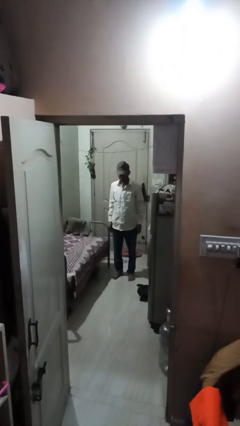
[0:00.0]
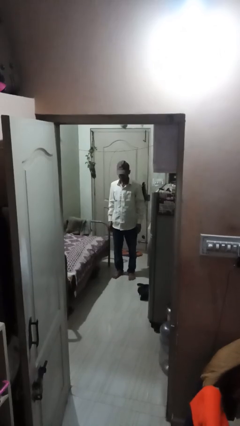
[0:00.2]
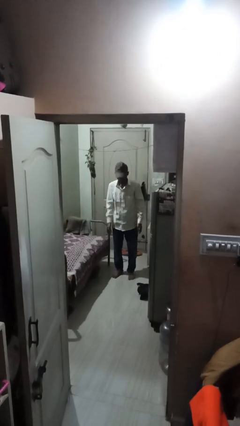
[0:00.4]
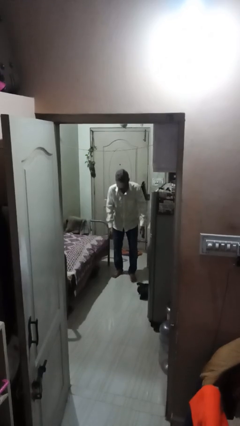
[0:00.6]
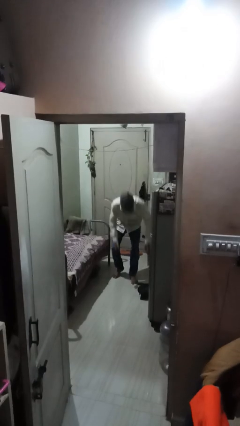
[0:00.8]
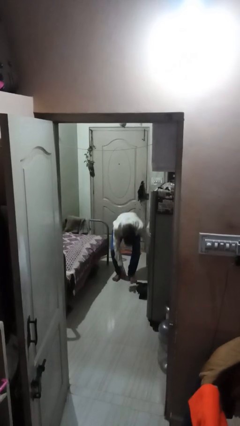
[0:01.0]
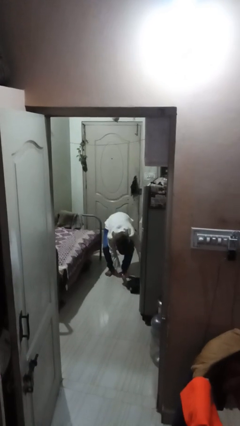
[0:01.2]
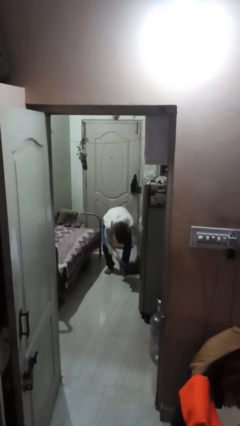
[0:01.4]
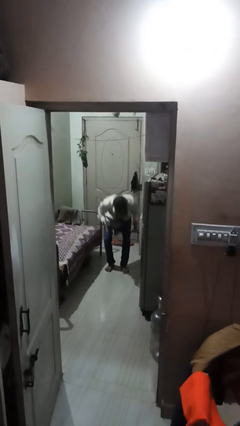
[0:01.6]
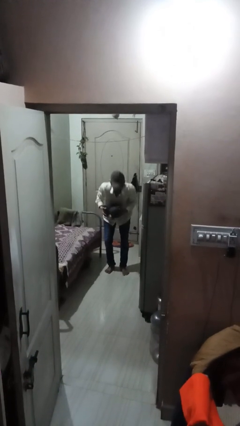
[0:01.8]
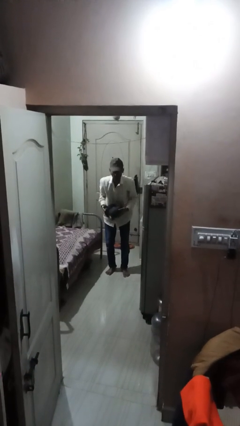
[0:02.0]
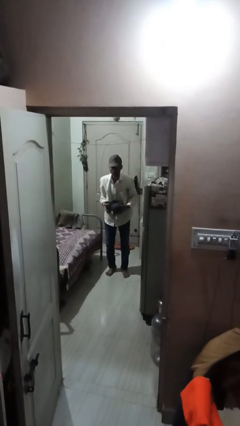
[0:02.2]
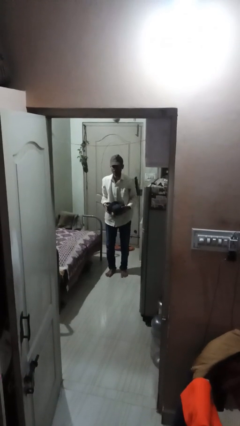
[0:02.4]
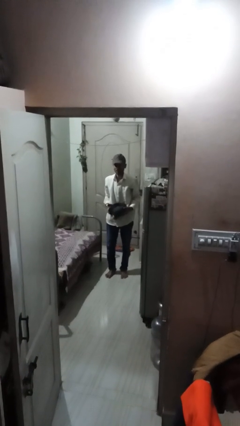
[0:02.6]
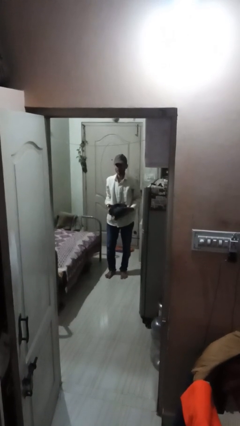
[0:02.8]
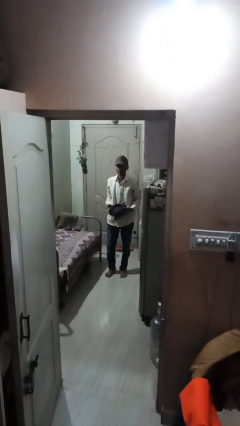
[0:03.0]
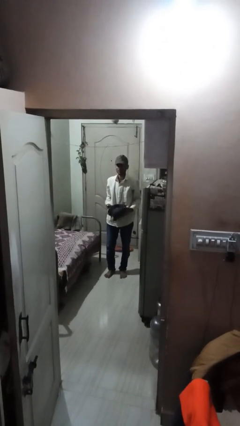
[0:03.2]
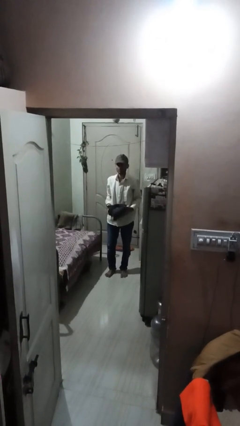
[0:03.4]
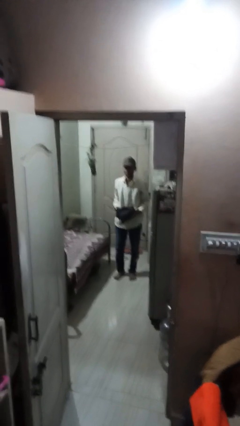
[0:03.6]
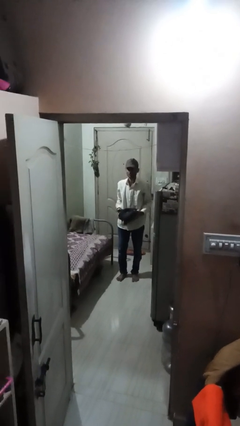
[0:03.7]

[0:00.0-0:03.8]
person picks up object from floor

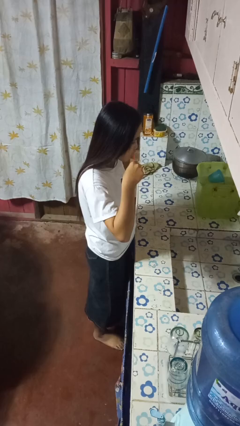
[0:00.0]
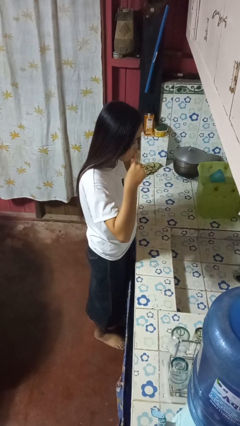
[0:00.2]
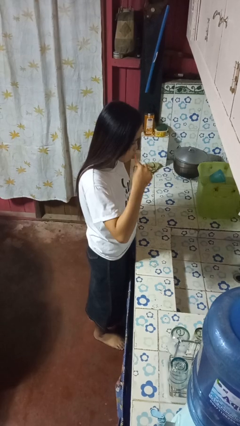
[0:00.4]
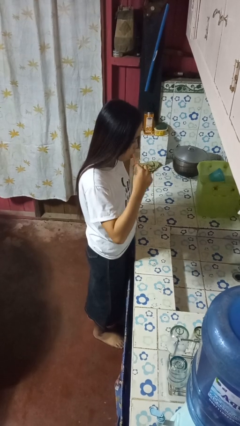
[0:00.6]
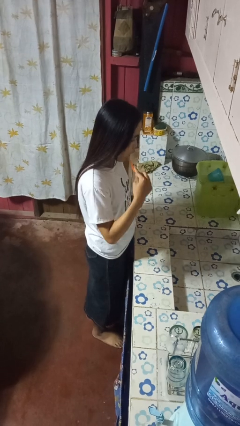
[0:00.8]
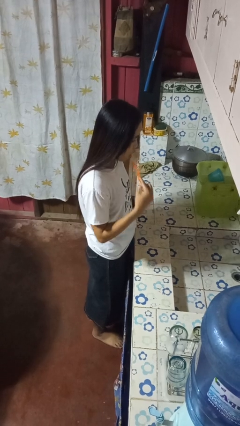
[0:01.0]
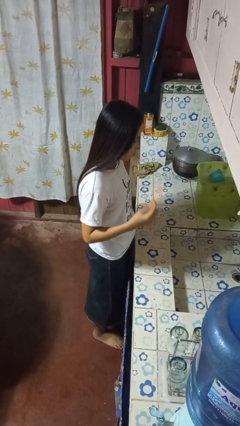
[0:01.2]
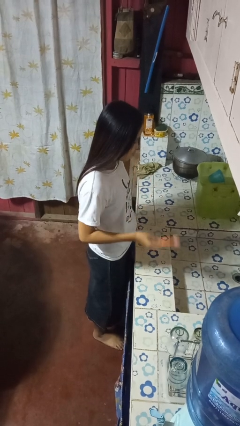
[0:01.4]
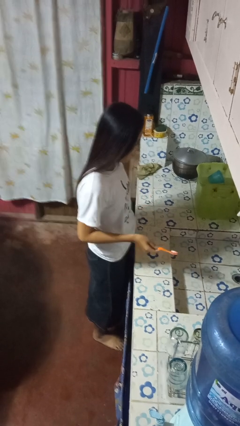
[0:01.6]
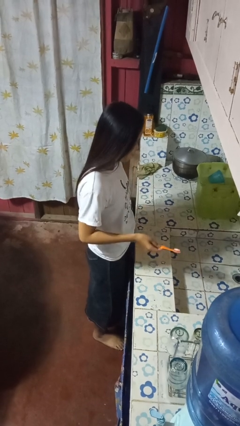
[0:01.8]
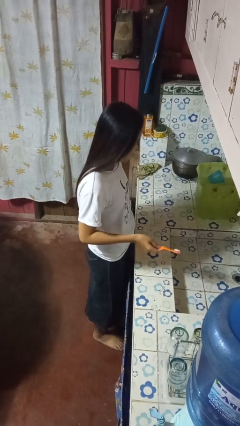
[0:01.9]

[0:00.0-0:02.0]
person brushes teeth

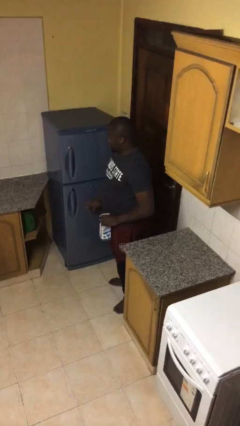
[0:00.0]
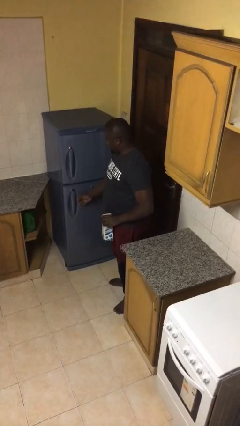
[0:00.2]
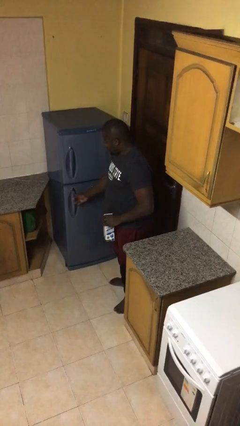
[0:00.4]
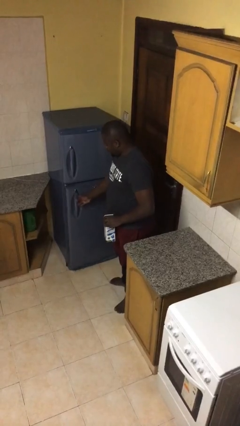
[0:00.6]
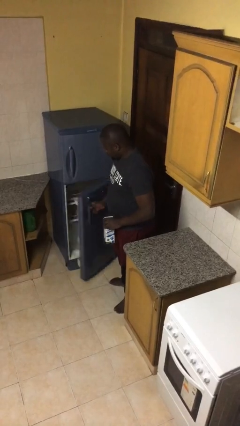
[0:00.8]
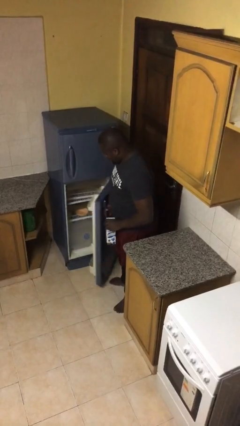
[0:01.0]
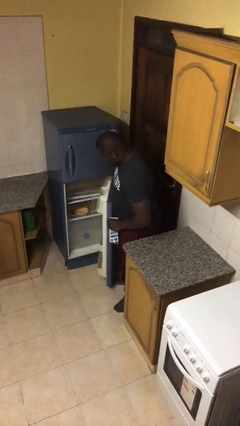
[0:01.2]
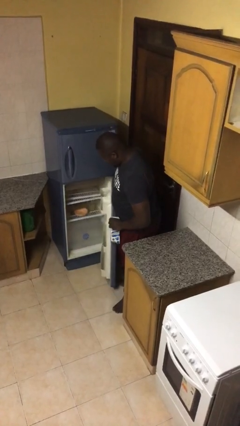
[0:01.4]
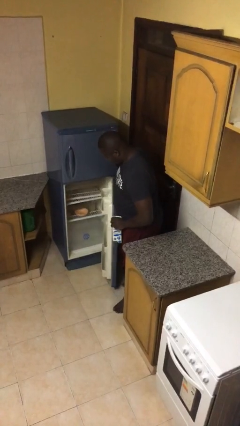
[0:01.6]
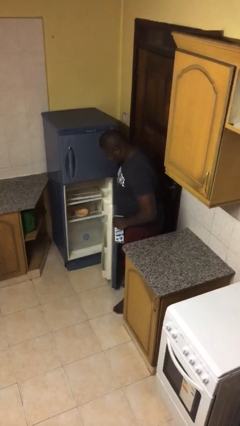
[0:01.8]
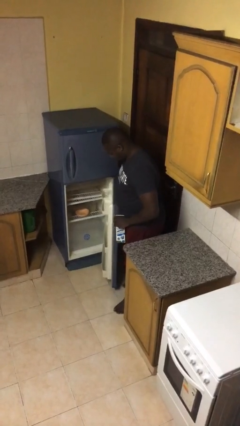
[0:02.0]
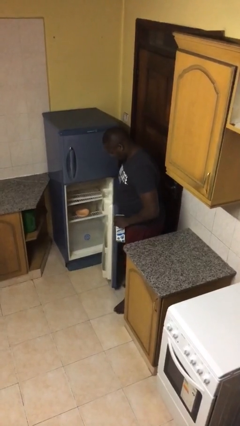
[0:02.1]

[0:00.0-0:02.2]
person opens refrigerator

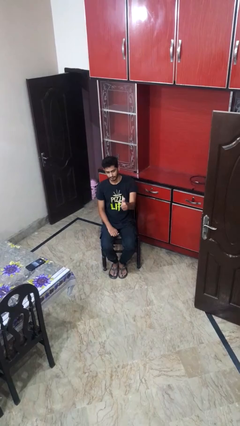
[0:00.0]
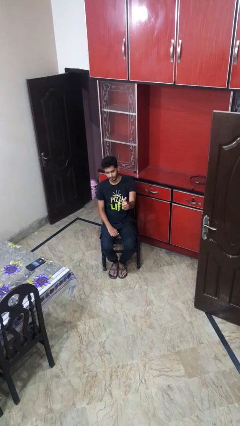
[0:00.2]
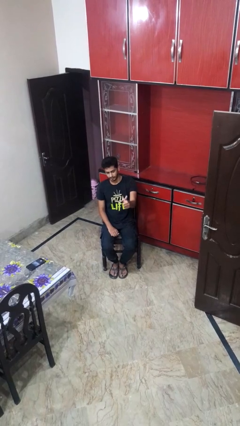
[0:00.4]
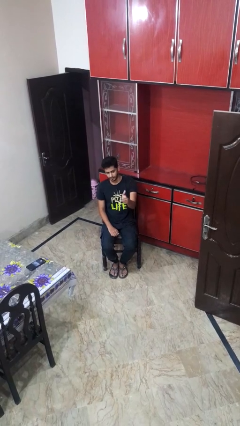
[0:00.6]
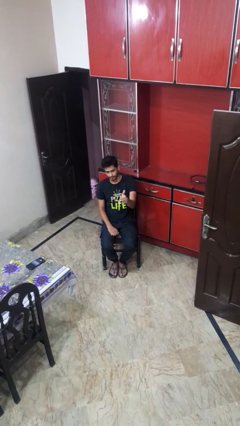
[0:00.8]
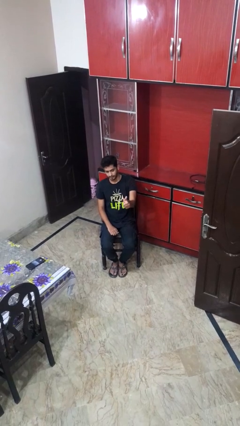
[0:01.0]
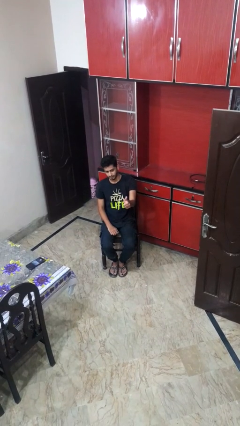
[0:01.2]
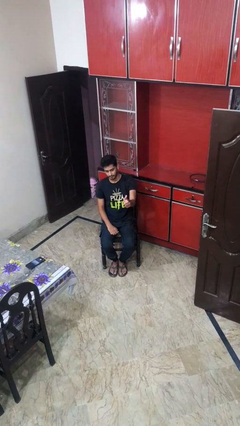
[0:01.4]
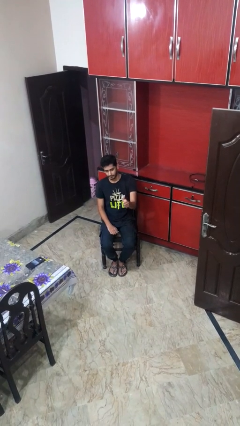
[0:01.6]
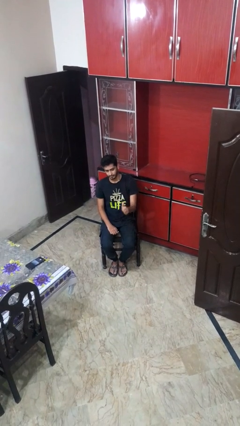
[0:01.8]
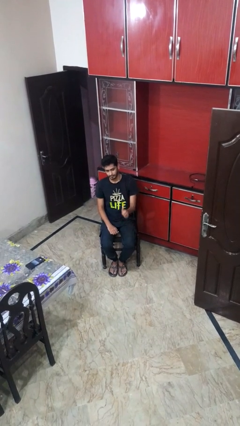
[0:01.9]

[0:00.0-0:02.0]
person gestures thumbs up

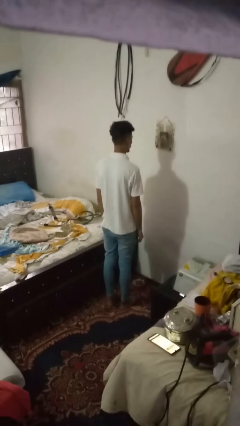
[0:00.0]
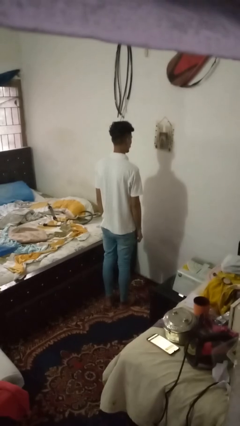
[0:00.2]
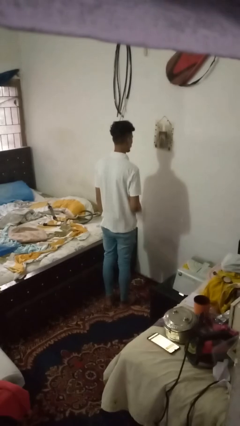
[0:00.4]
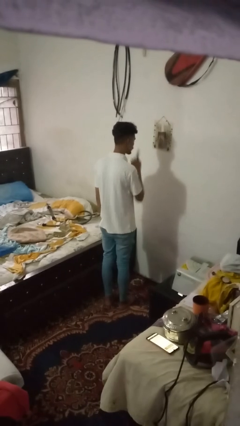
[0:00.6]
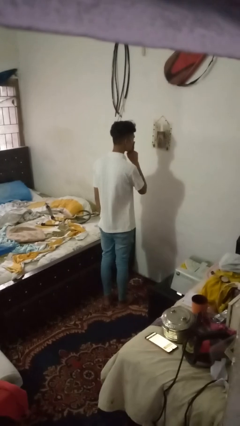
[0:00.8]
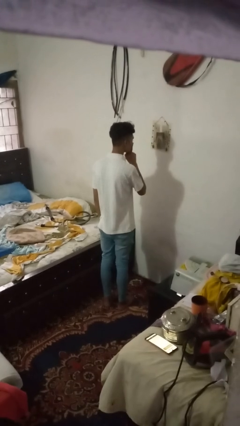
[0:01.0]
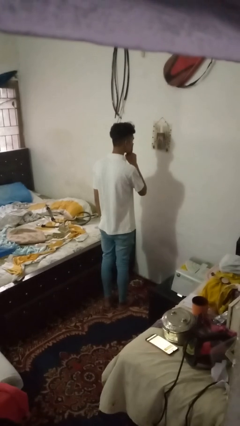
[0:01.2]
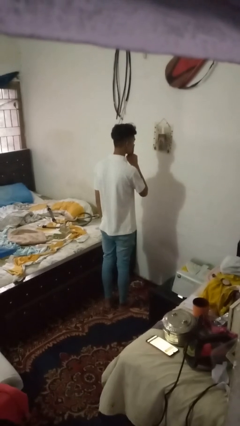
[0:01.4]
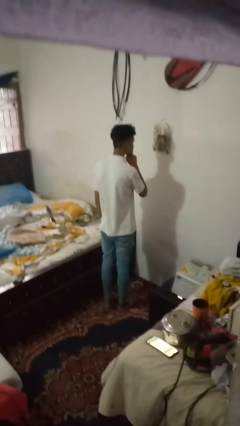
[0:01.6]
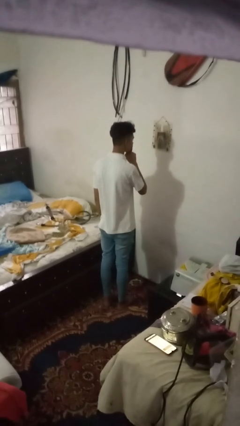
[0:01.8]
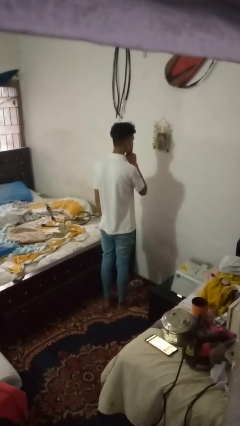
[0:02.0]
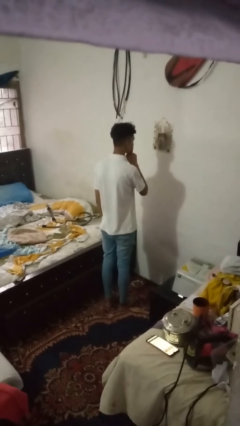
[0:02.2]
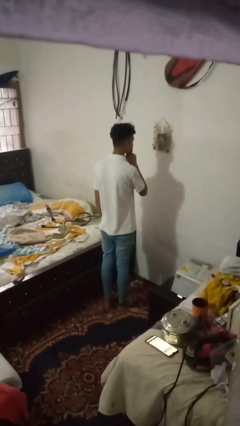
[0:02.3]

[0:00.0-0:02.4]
person gestures be quiet

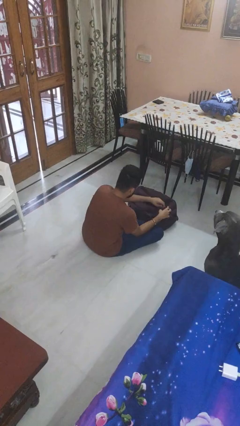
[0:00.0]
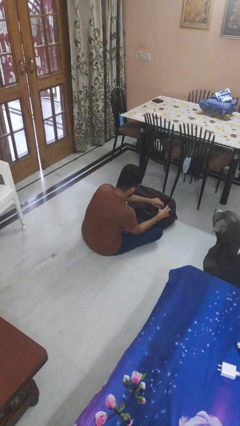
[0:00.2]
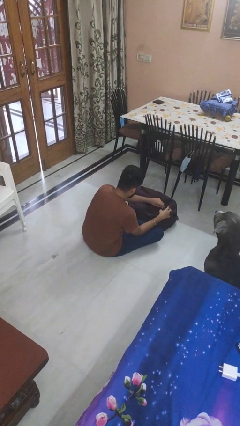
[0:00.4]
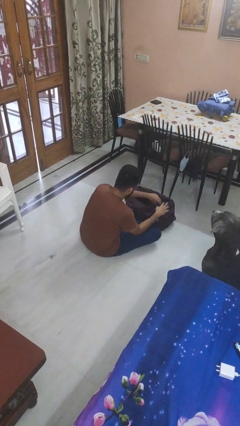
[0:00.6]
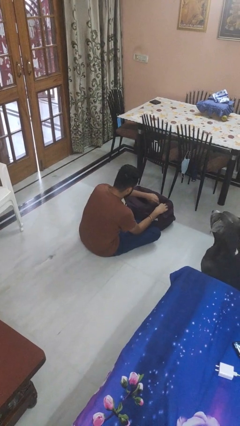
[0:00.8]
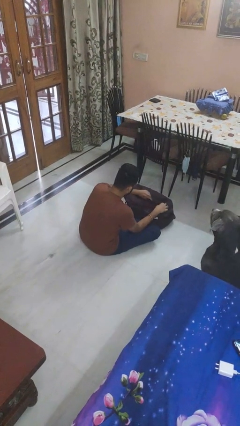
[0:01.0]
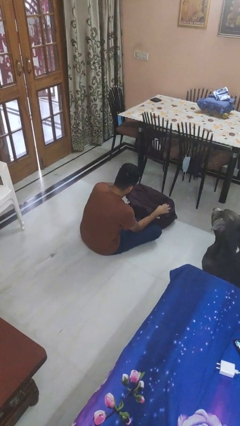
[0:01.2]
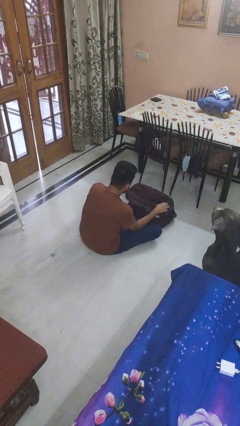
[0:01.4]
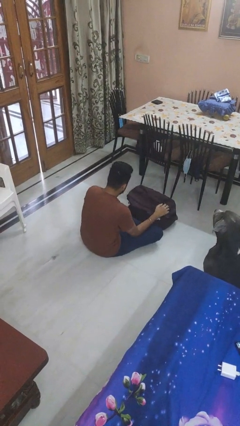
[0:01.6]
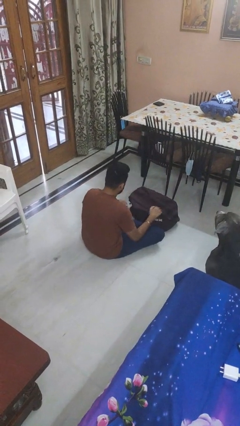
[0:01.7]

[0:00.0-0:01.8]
person closes suitcase

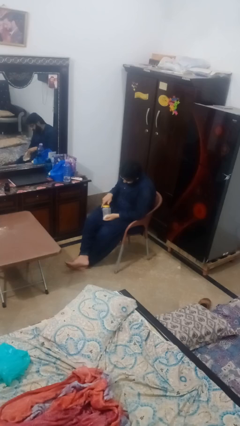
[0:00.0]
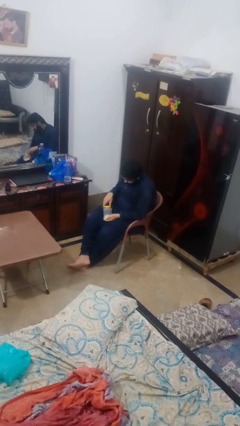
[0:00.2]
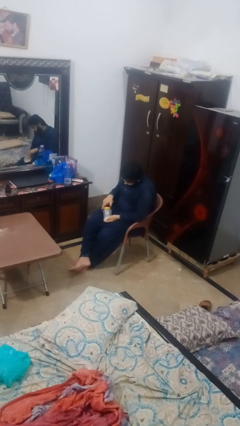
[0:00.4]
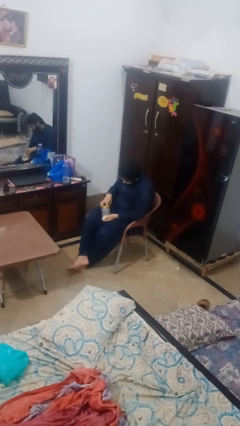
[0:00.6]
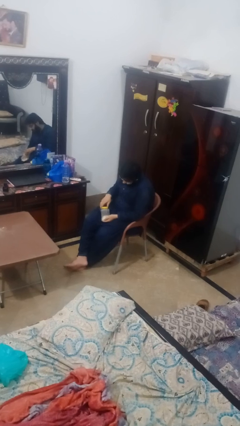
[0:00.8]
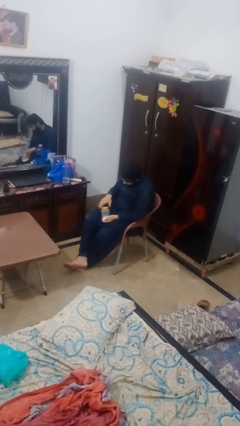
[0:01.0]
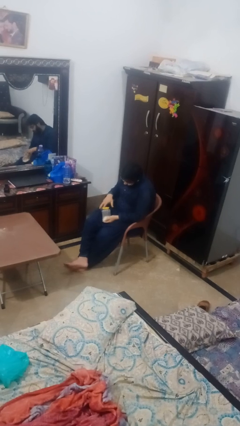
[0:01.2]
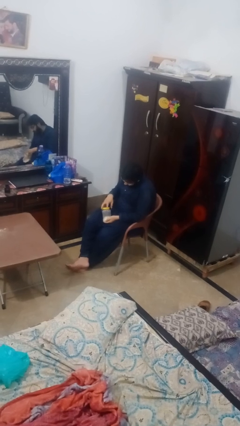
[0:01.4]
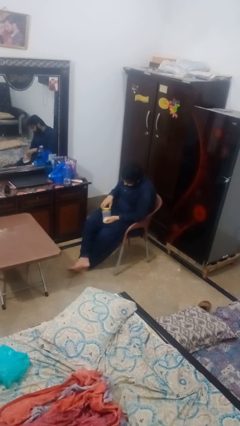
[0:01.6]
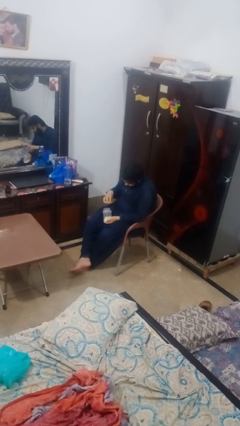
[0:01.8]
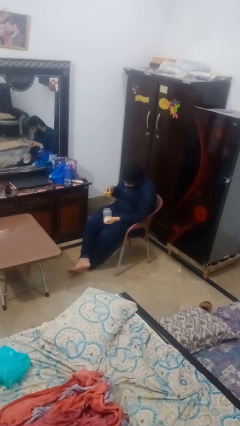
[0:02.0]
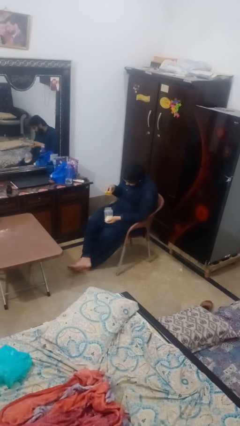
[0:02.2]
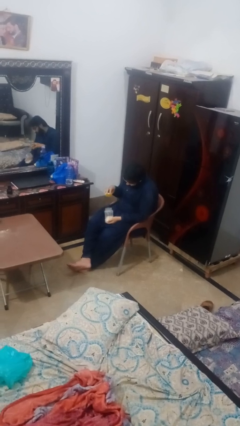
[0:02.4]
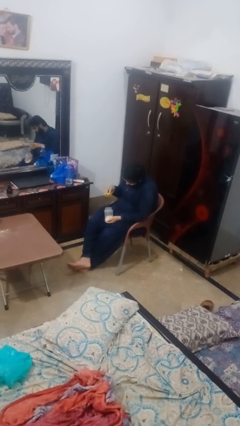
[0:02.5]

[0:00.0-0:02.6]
person opens jar

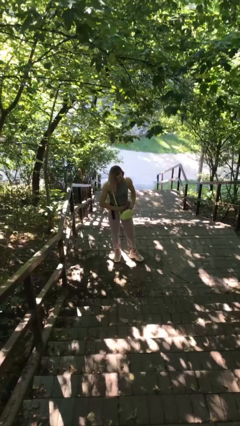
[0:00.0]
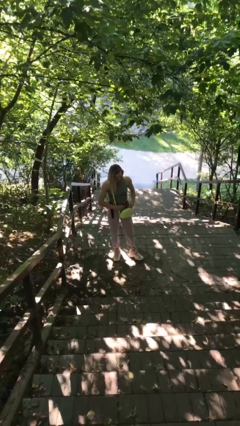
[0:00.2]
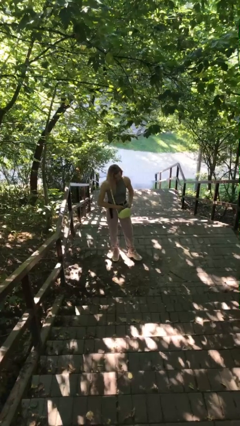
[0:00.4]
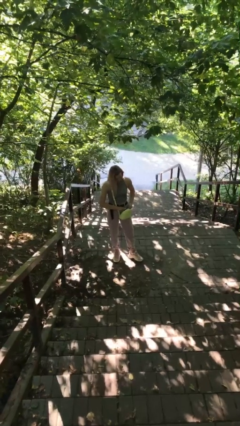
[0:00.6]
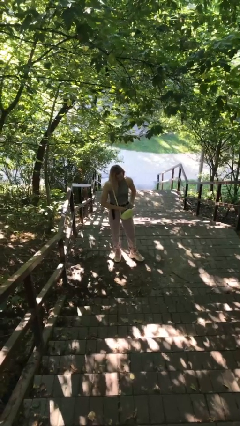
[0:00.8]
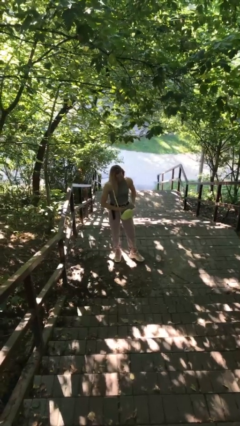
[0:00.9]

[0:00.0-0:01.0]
person puts object into purse
